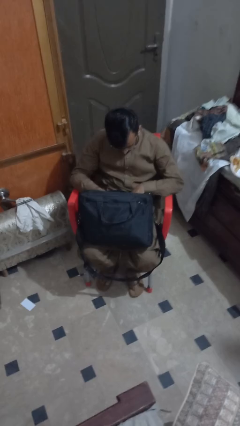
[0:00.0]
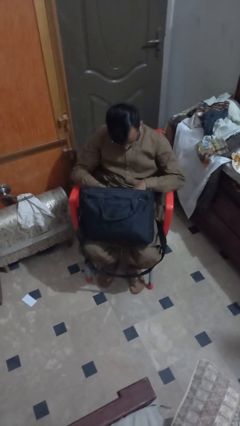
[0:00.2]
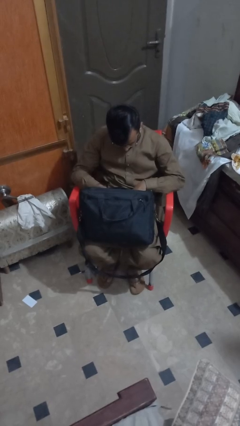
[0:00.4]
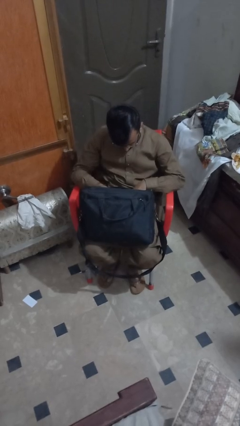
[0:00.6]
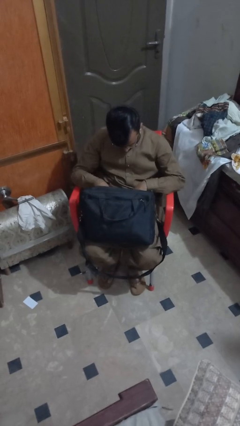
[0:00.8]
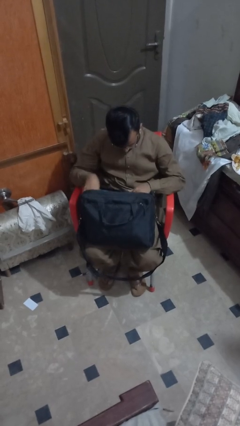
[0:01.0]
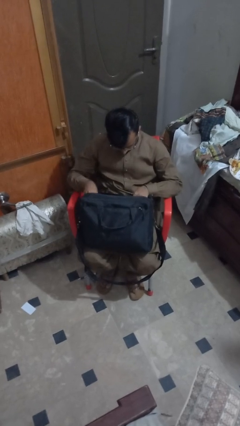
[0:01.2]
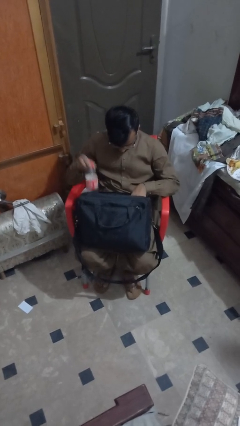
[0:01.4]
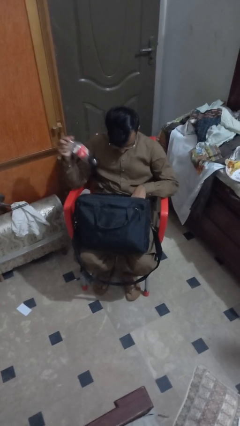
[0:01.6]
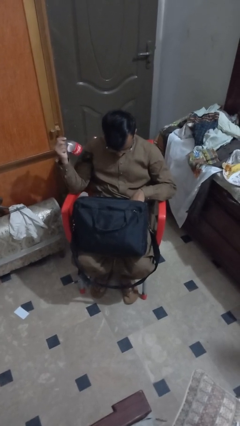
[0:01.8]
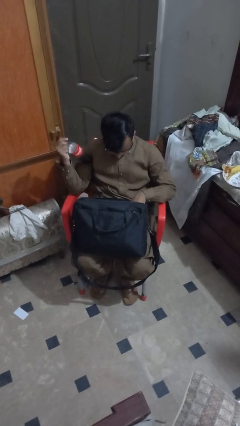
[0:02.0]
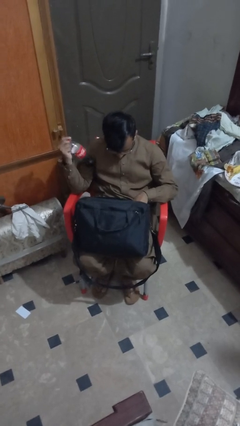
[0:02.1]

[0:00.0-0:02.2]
person takes object from bag

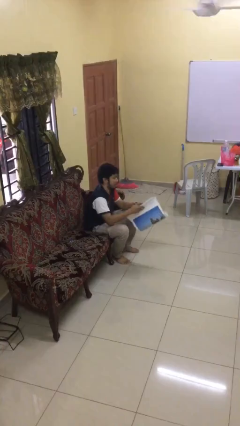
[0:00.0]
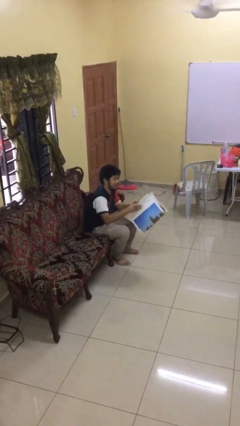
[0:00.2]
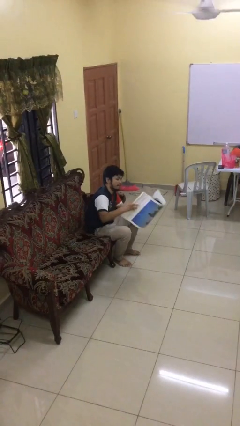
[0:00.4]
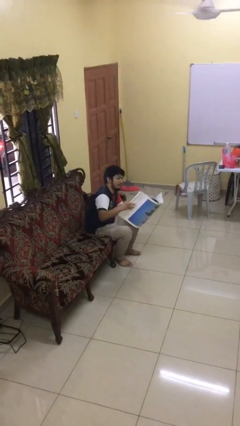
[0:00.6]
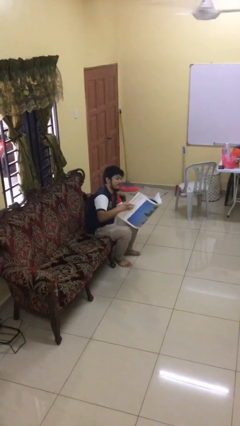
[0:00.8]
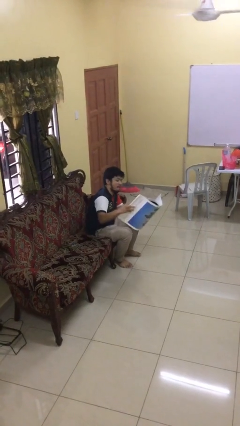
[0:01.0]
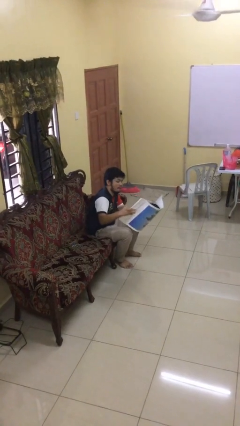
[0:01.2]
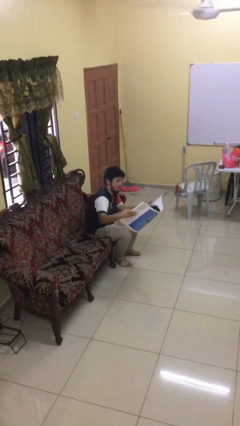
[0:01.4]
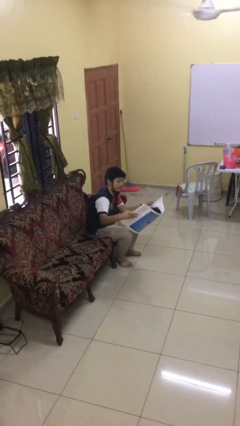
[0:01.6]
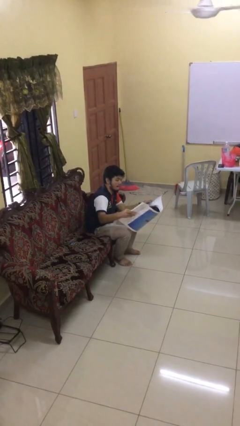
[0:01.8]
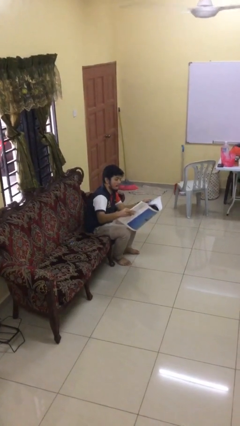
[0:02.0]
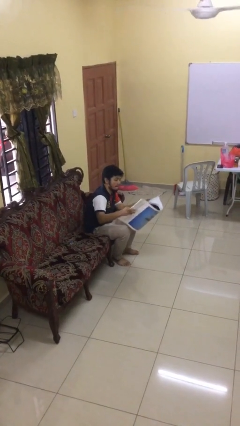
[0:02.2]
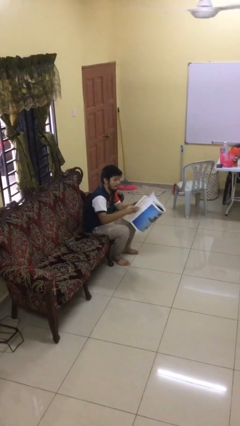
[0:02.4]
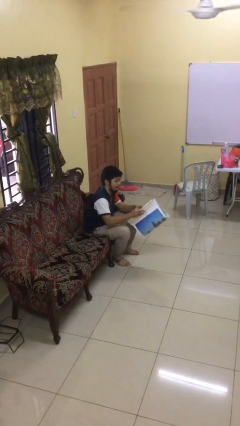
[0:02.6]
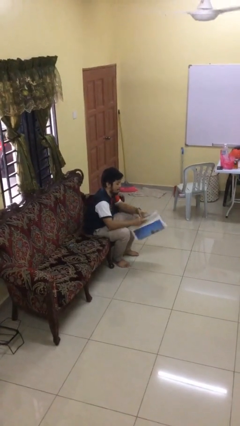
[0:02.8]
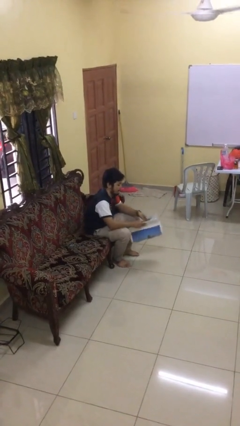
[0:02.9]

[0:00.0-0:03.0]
person reads newspaper

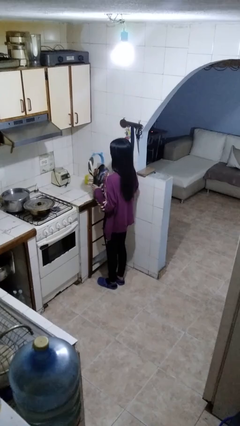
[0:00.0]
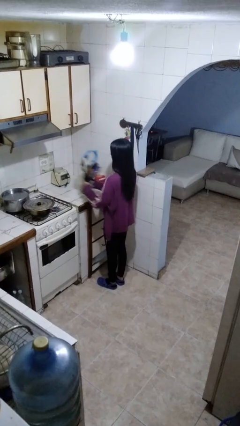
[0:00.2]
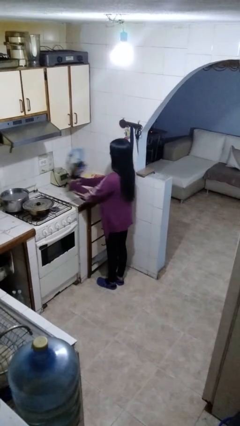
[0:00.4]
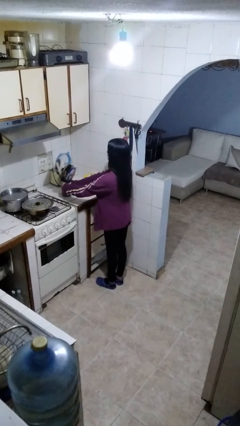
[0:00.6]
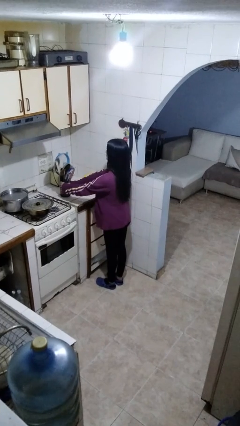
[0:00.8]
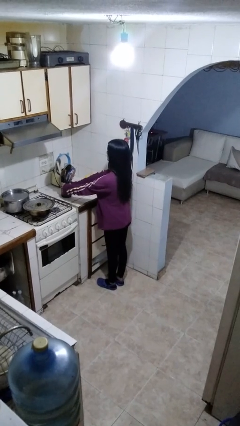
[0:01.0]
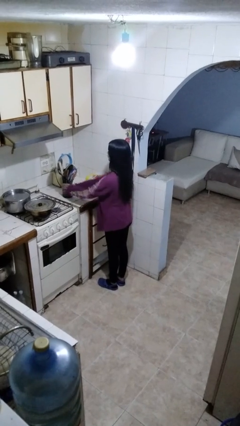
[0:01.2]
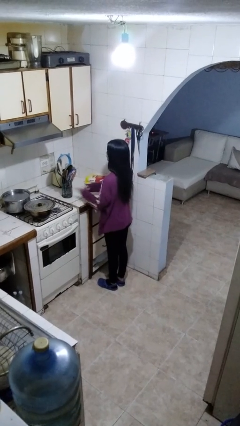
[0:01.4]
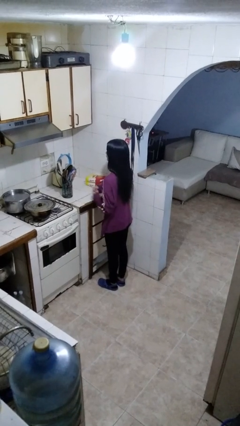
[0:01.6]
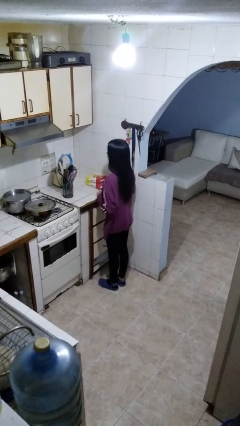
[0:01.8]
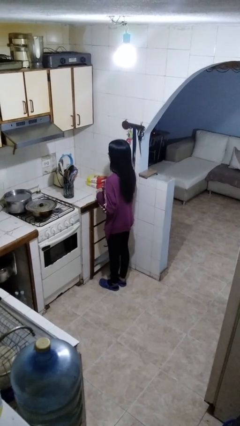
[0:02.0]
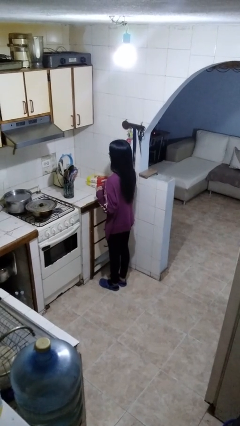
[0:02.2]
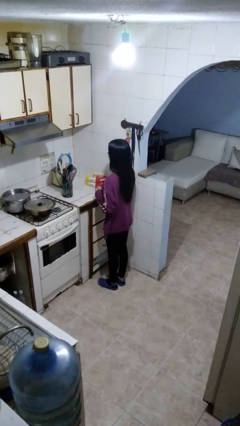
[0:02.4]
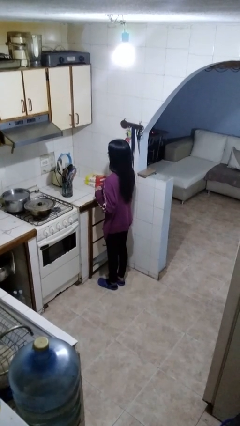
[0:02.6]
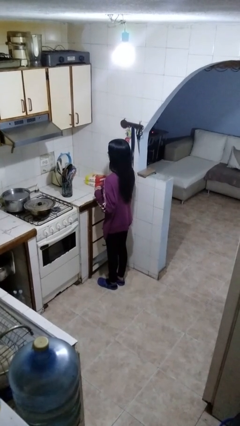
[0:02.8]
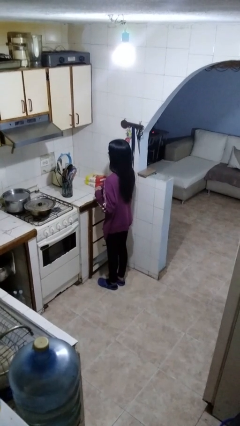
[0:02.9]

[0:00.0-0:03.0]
person picks up object from countertop

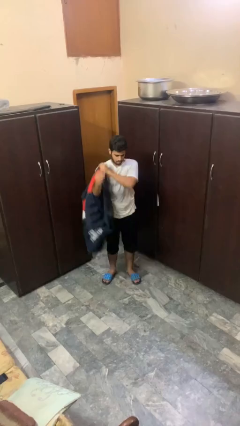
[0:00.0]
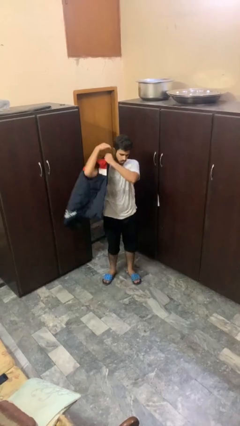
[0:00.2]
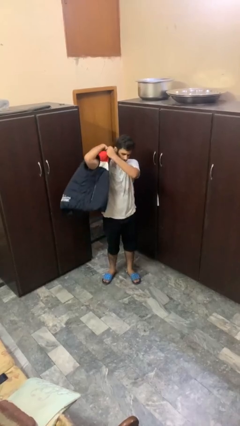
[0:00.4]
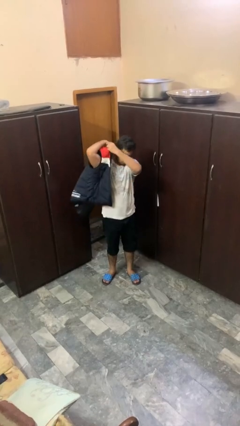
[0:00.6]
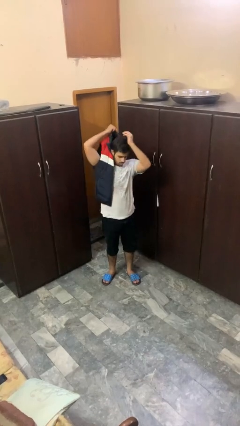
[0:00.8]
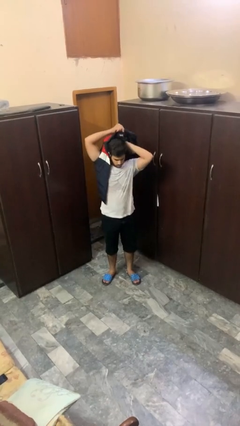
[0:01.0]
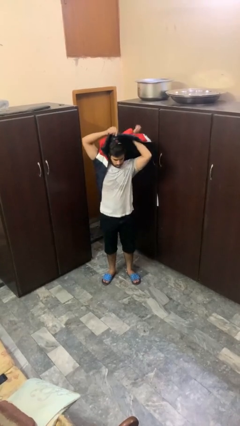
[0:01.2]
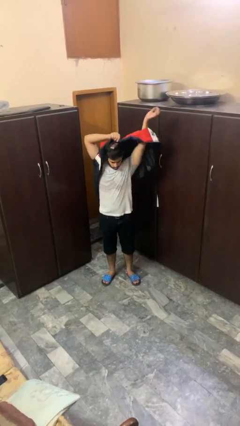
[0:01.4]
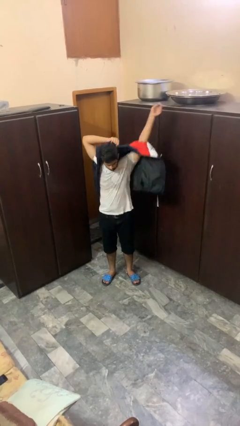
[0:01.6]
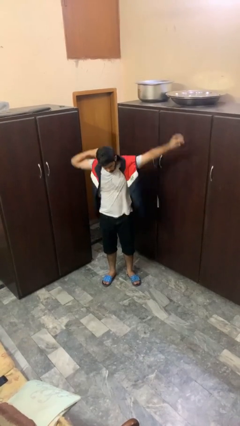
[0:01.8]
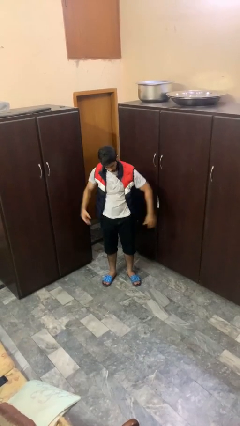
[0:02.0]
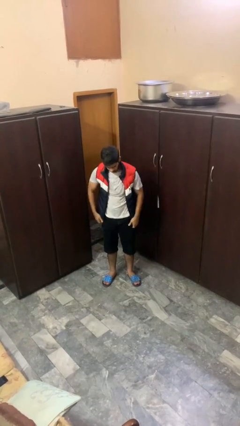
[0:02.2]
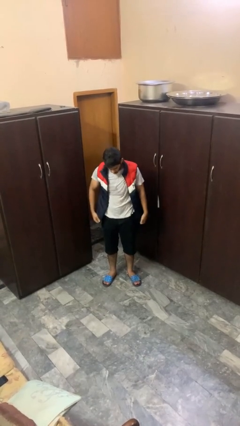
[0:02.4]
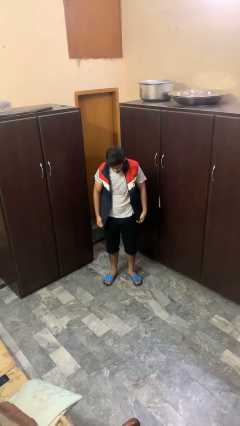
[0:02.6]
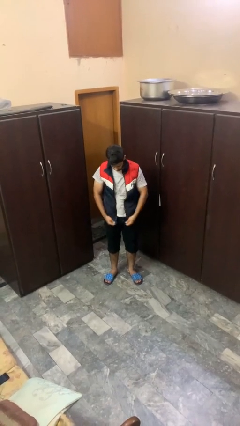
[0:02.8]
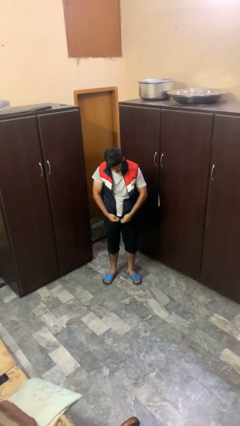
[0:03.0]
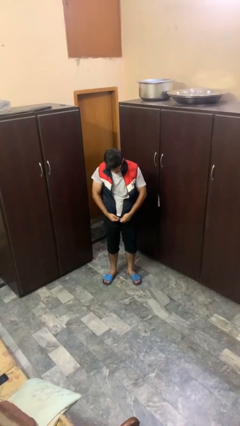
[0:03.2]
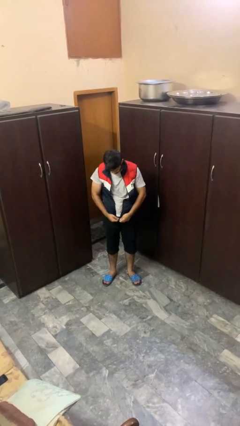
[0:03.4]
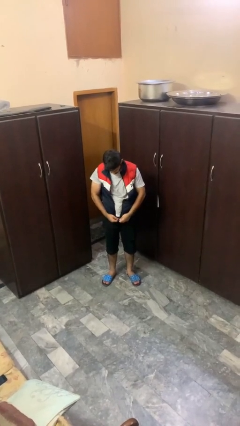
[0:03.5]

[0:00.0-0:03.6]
person puts on jacket

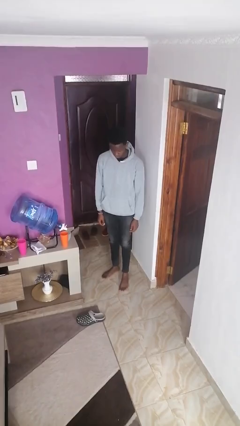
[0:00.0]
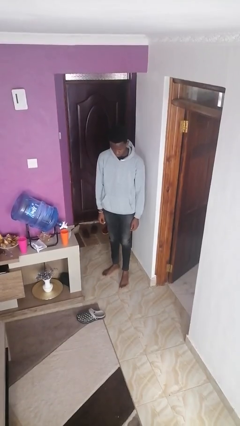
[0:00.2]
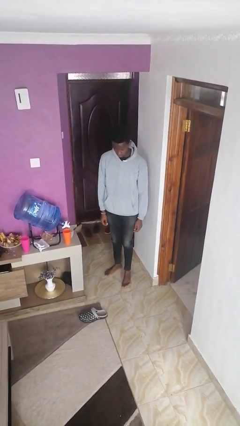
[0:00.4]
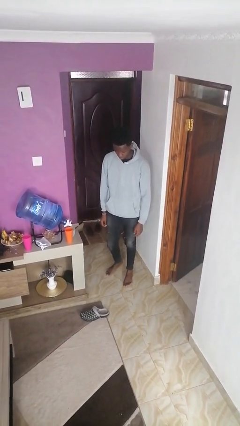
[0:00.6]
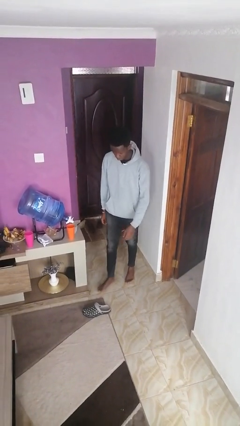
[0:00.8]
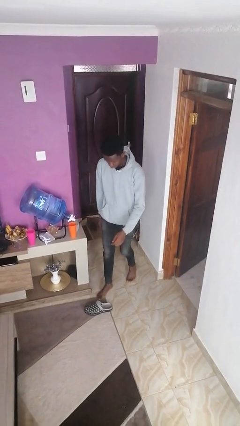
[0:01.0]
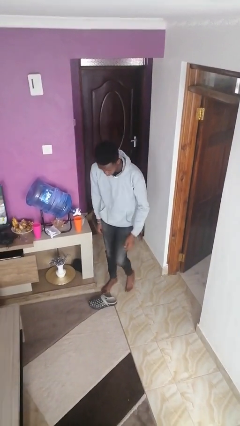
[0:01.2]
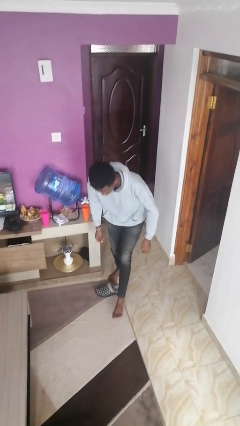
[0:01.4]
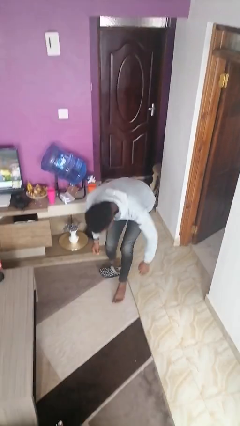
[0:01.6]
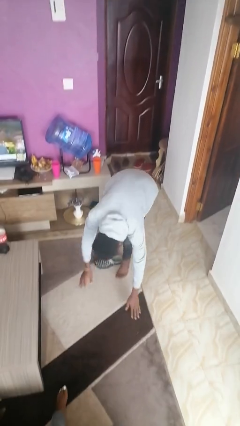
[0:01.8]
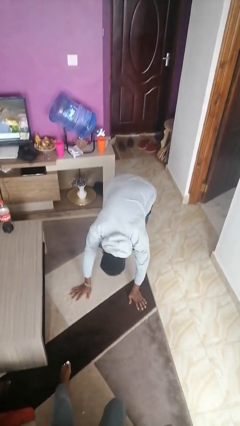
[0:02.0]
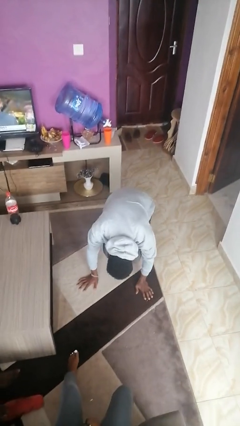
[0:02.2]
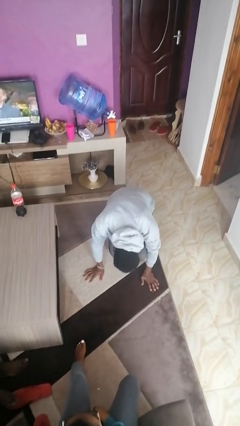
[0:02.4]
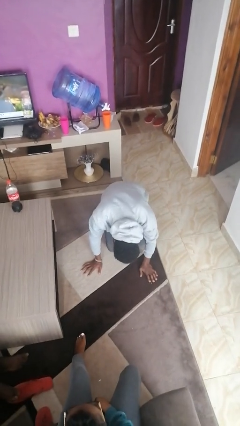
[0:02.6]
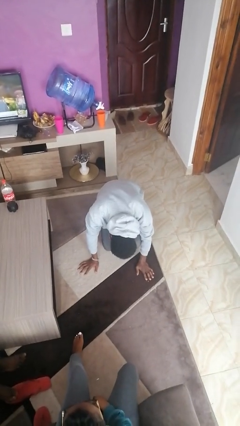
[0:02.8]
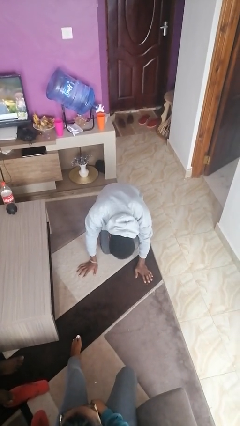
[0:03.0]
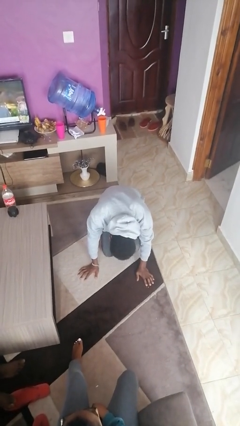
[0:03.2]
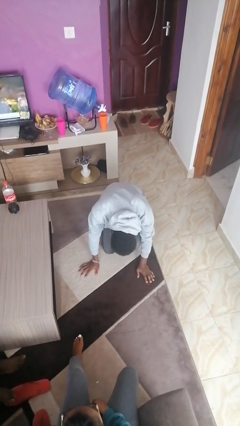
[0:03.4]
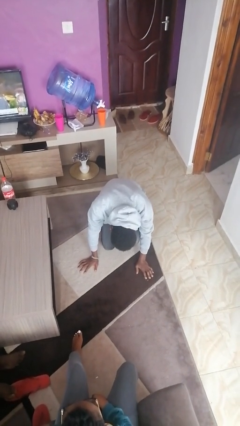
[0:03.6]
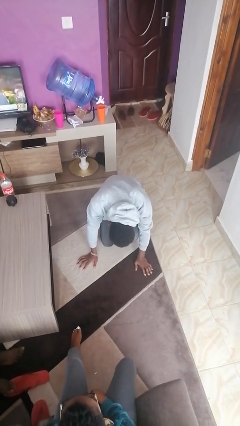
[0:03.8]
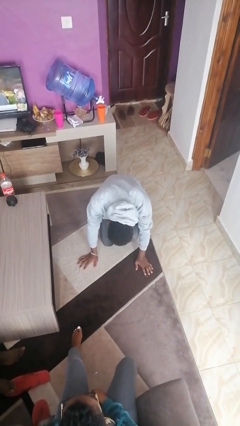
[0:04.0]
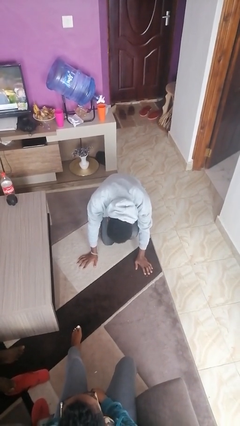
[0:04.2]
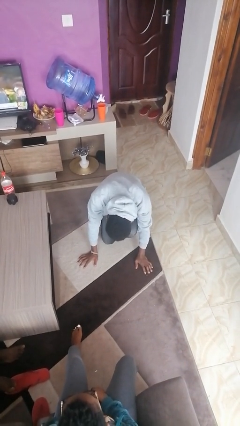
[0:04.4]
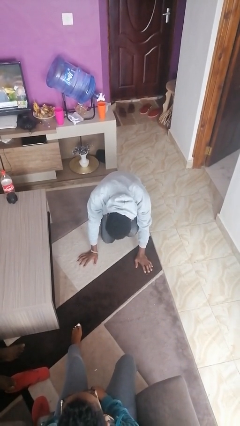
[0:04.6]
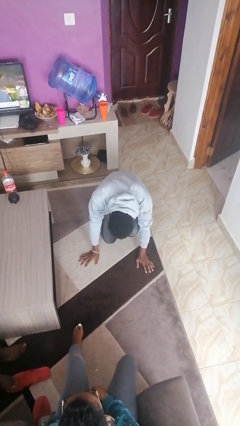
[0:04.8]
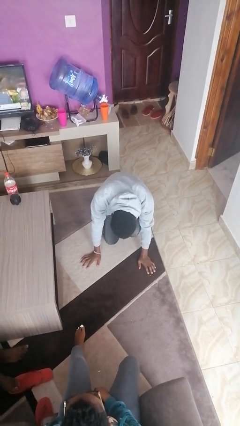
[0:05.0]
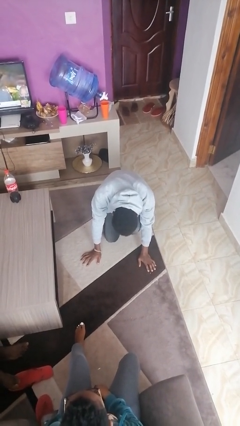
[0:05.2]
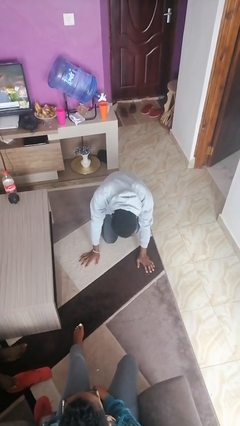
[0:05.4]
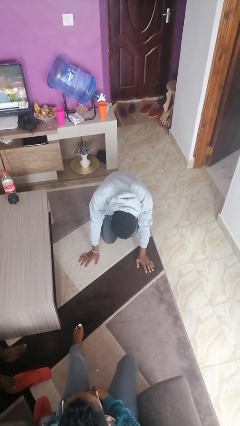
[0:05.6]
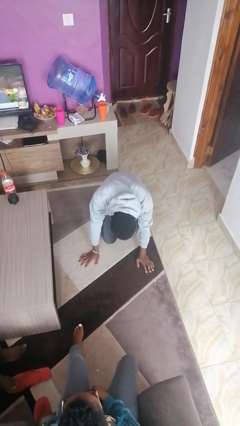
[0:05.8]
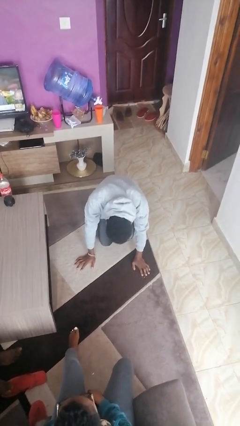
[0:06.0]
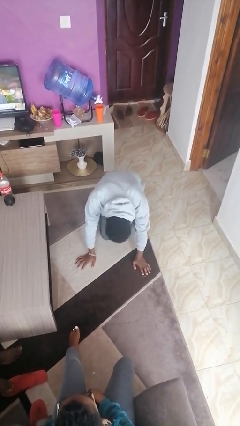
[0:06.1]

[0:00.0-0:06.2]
person trips on object on floor
